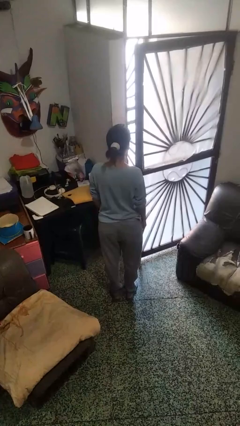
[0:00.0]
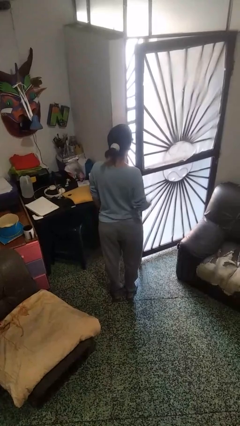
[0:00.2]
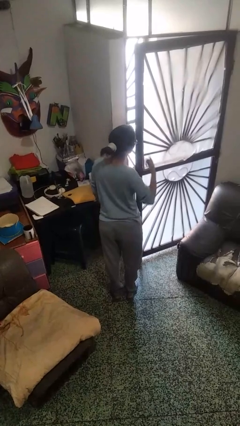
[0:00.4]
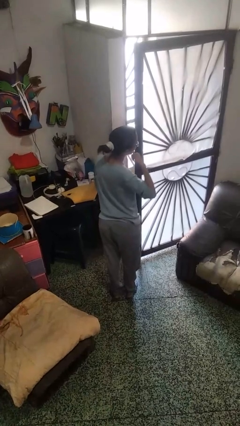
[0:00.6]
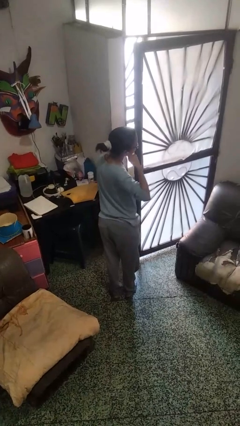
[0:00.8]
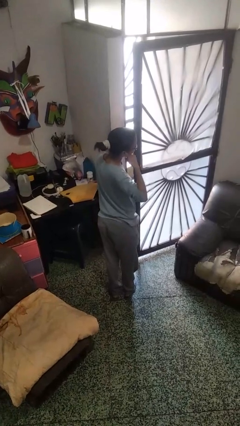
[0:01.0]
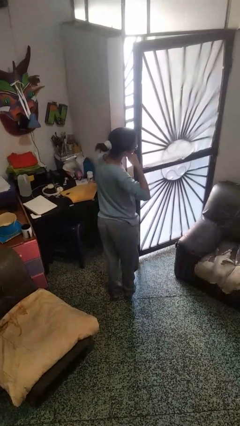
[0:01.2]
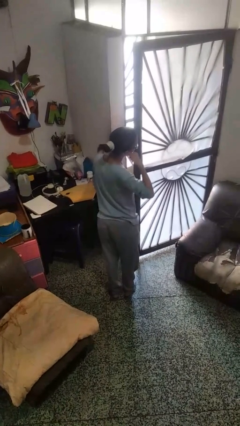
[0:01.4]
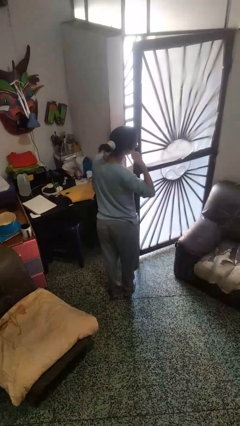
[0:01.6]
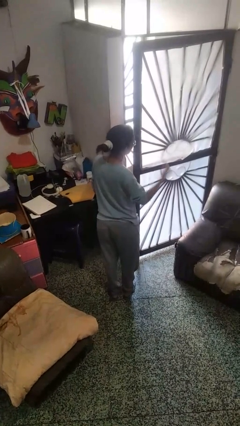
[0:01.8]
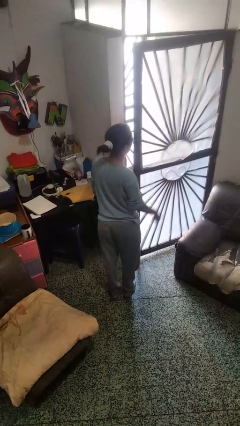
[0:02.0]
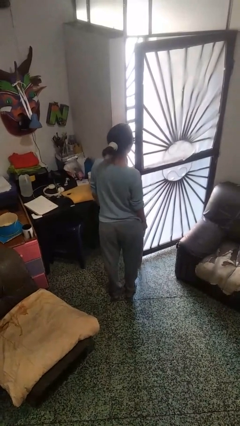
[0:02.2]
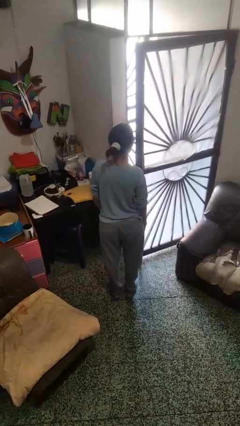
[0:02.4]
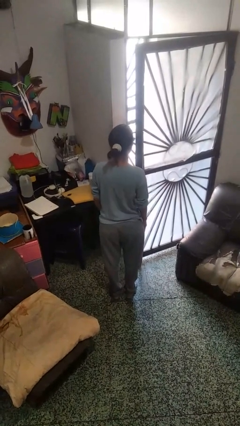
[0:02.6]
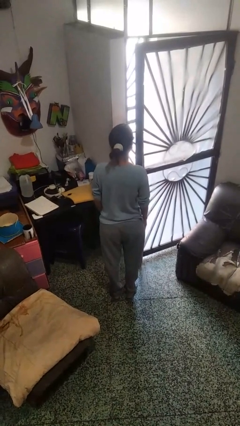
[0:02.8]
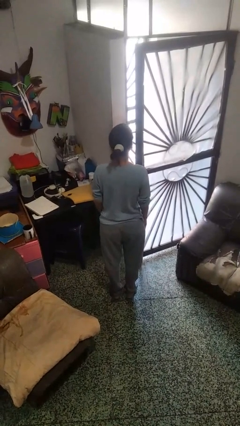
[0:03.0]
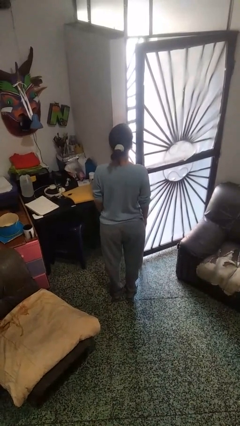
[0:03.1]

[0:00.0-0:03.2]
person gestures call me

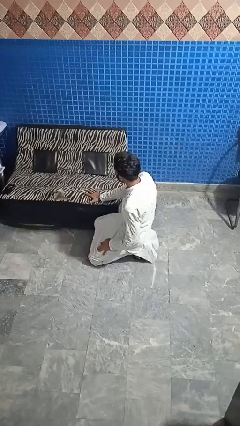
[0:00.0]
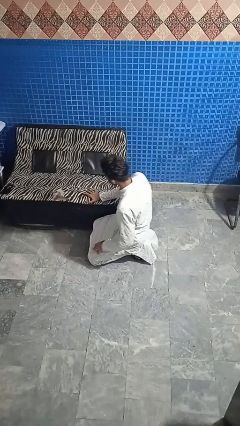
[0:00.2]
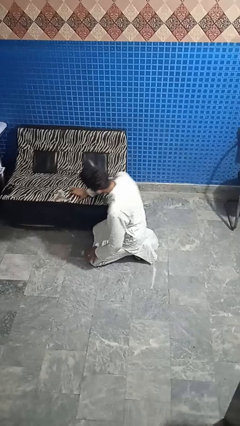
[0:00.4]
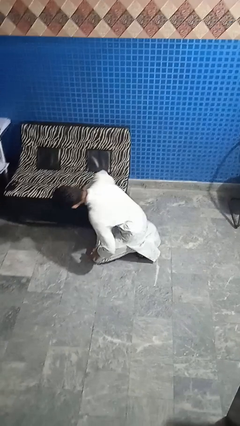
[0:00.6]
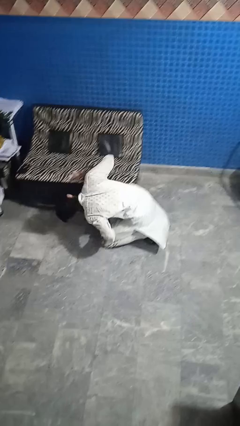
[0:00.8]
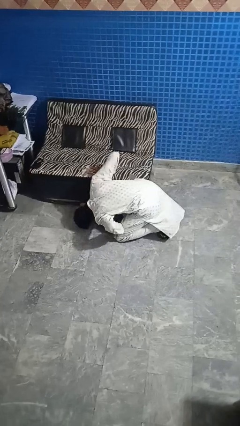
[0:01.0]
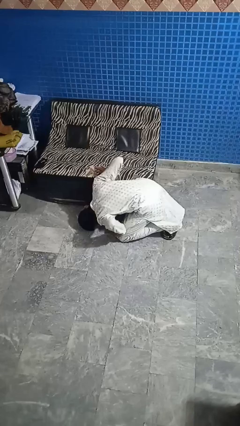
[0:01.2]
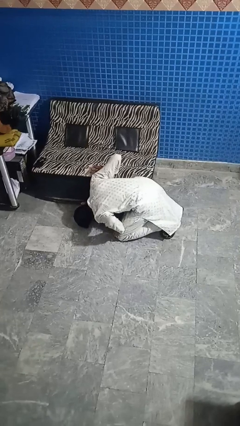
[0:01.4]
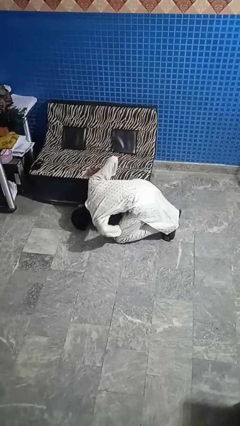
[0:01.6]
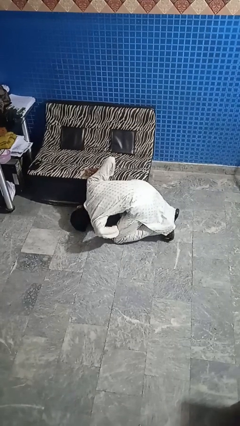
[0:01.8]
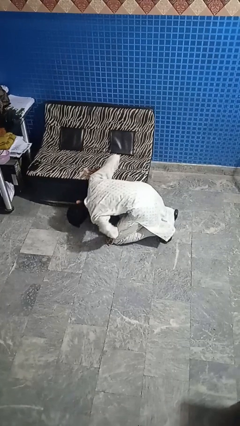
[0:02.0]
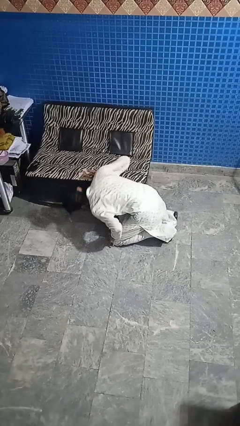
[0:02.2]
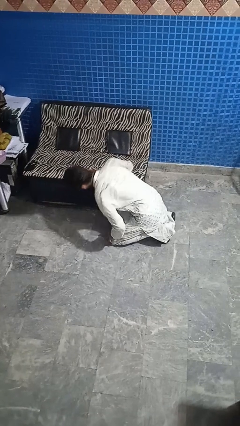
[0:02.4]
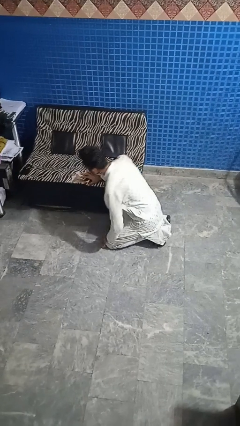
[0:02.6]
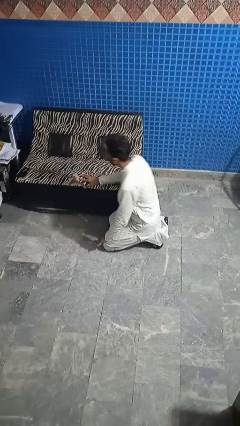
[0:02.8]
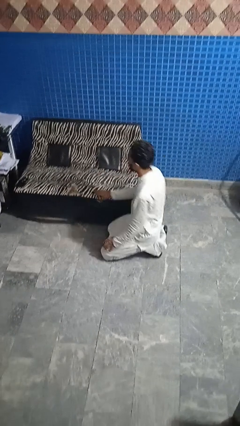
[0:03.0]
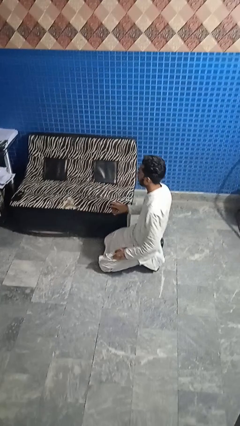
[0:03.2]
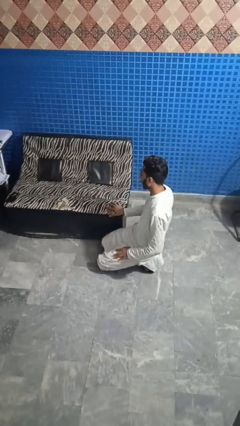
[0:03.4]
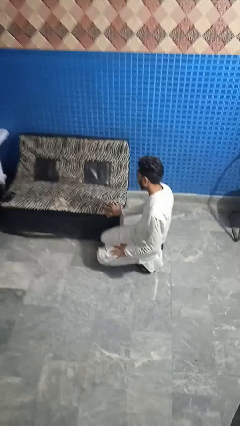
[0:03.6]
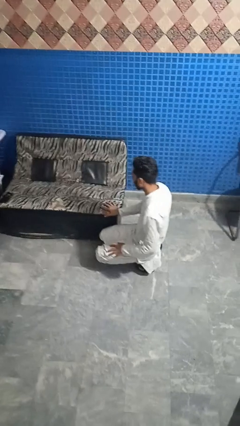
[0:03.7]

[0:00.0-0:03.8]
person searches under couch

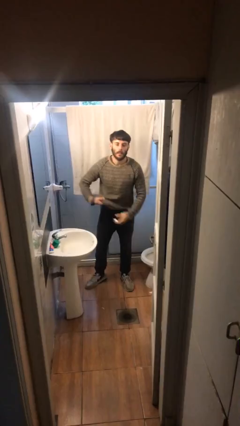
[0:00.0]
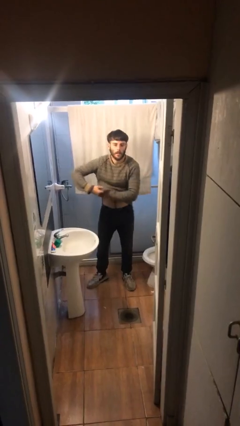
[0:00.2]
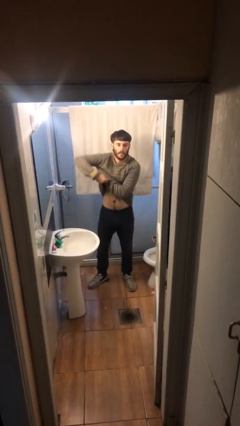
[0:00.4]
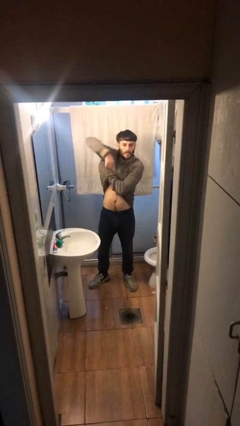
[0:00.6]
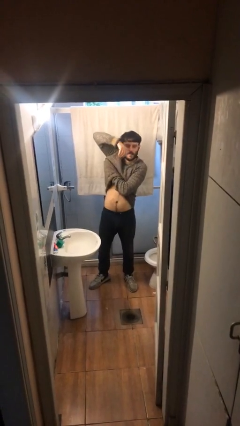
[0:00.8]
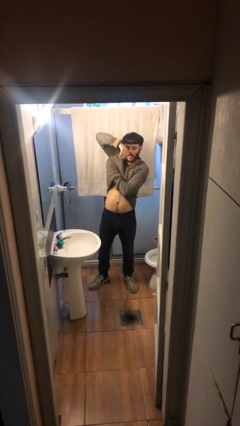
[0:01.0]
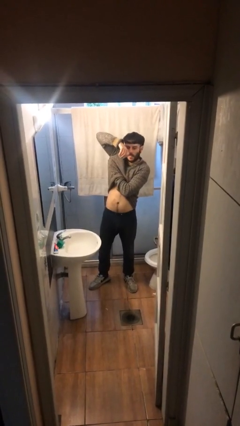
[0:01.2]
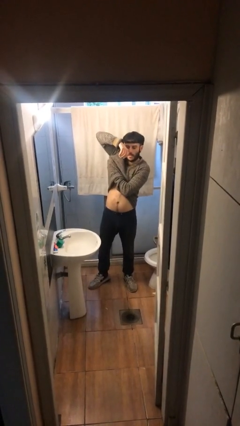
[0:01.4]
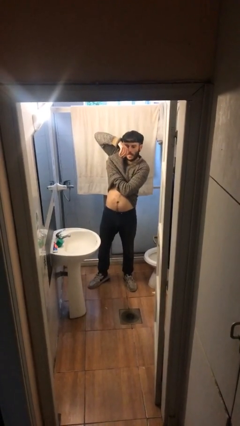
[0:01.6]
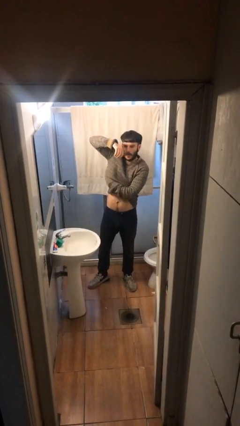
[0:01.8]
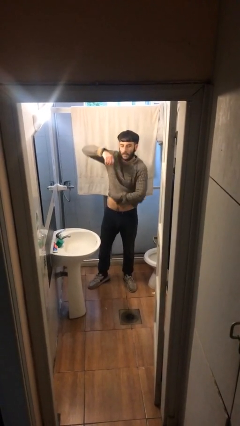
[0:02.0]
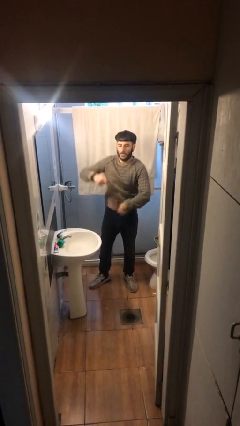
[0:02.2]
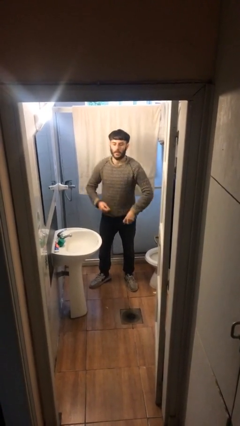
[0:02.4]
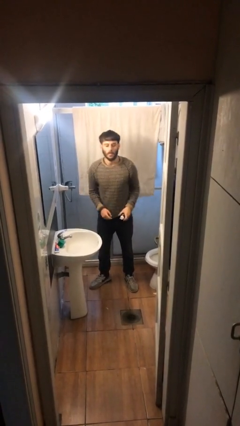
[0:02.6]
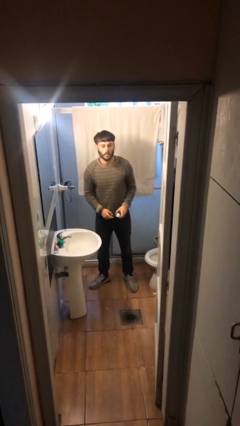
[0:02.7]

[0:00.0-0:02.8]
person applies deodorant

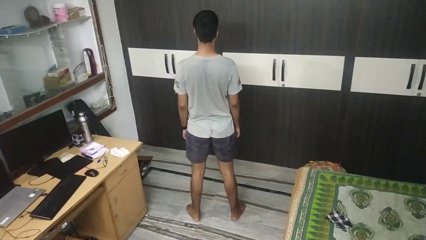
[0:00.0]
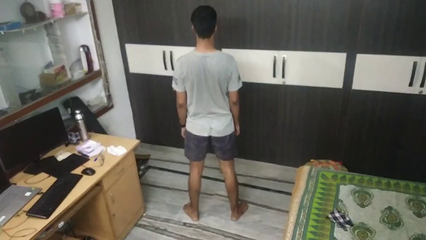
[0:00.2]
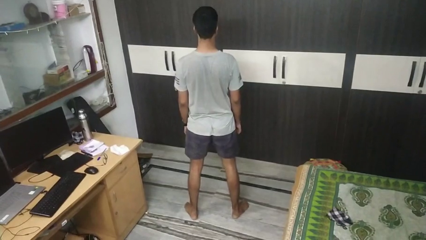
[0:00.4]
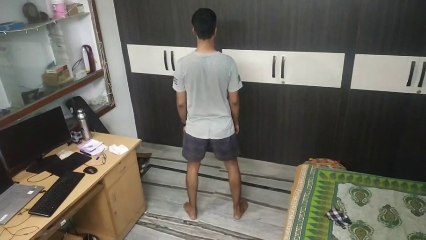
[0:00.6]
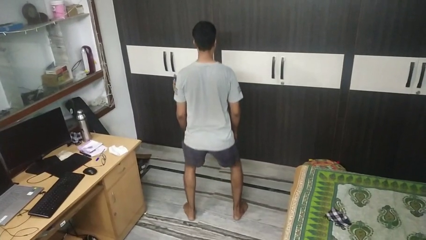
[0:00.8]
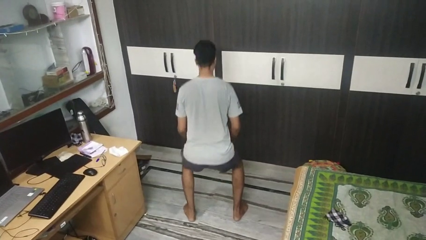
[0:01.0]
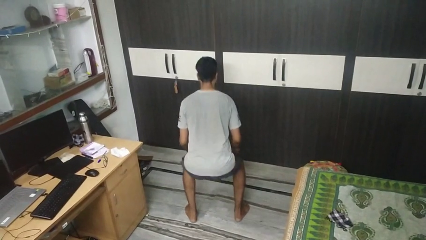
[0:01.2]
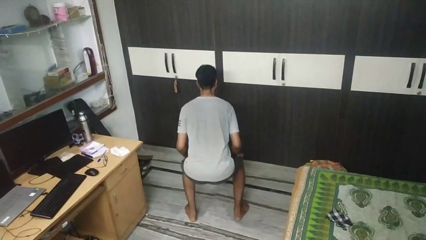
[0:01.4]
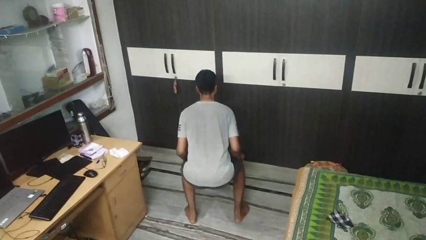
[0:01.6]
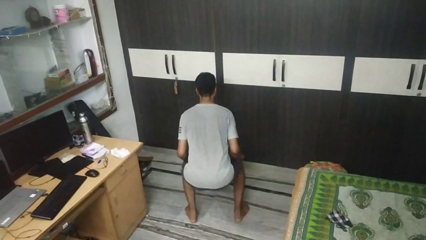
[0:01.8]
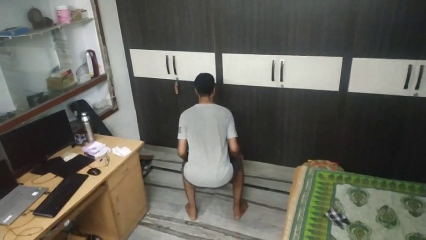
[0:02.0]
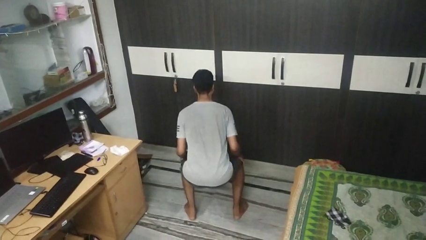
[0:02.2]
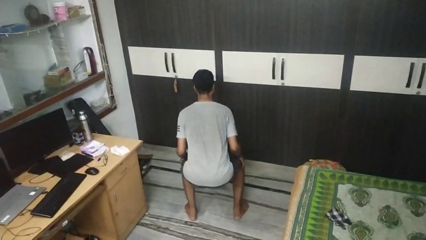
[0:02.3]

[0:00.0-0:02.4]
person squats

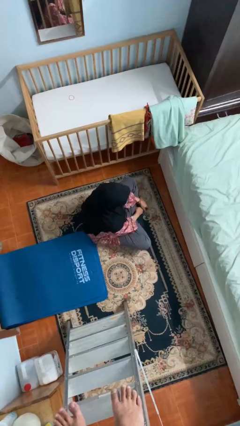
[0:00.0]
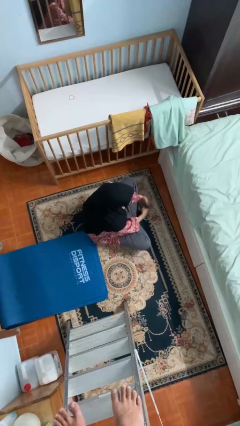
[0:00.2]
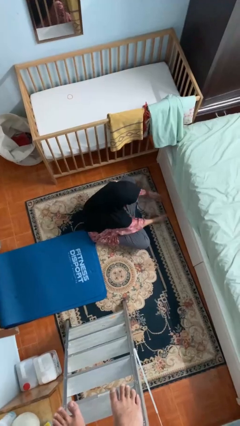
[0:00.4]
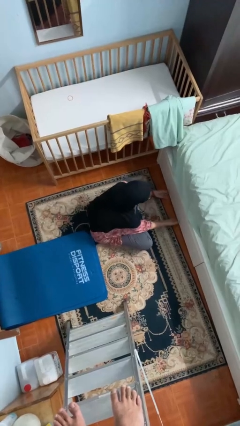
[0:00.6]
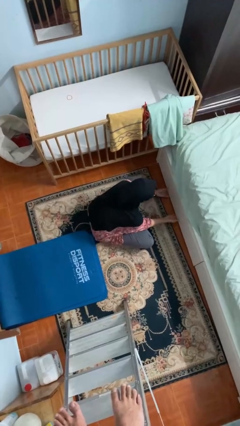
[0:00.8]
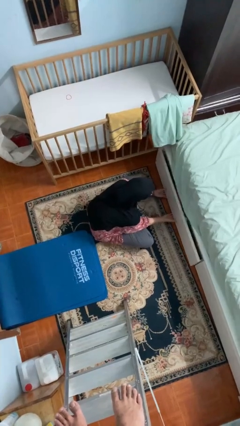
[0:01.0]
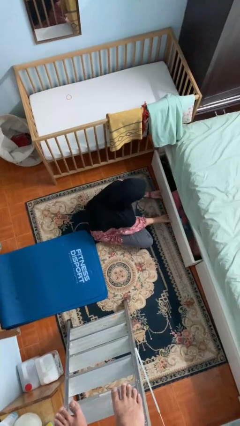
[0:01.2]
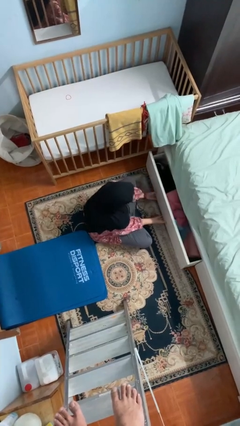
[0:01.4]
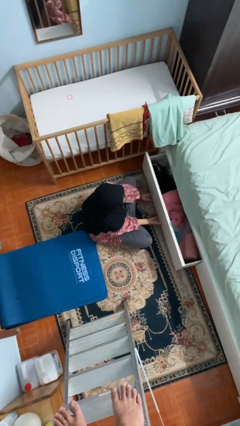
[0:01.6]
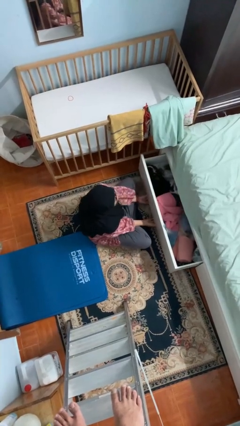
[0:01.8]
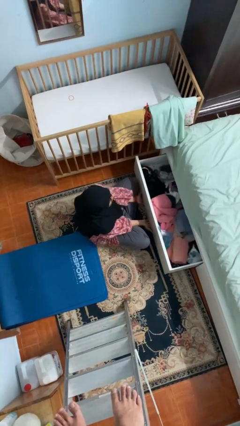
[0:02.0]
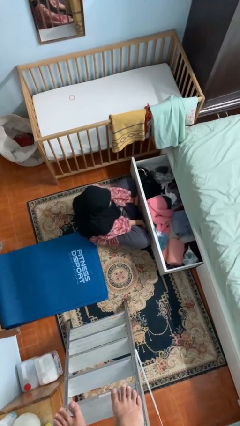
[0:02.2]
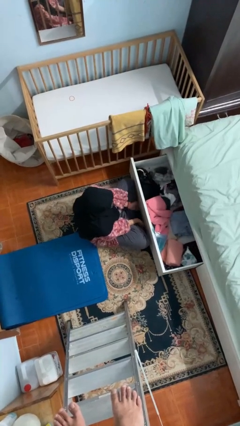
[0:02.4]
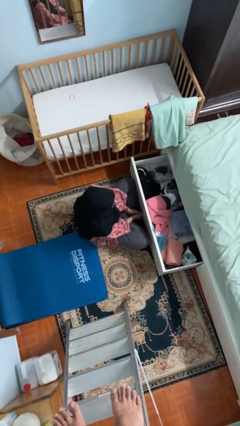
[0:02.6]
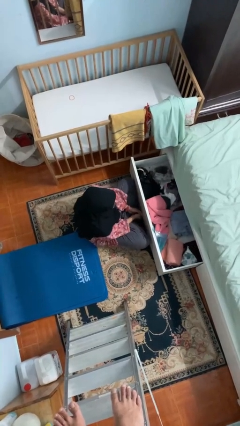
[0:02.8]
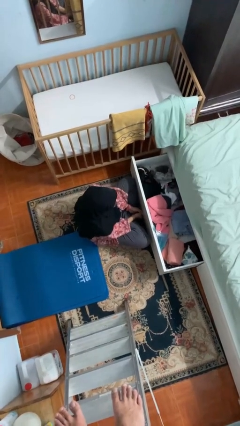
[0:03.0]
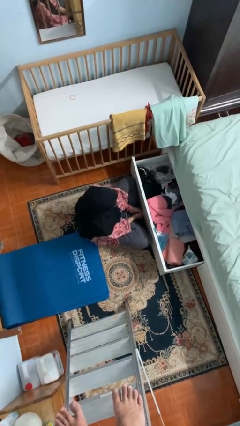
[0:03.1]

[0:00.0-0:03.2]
person opens dresser drawer

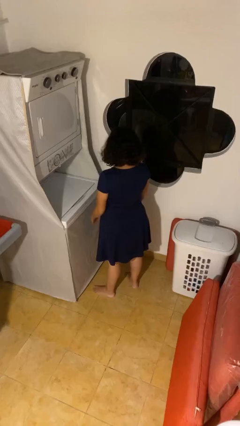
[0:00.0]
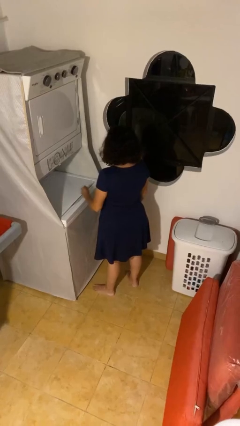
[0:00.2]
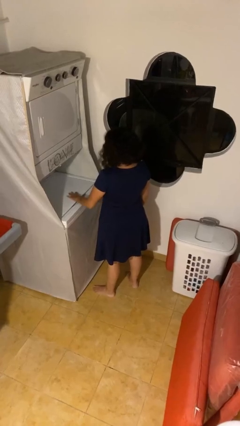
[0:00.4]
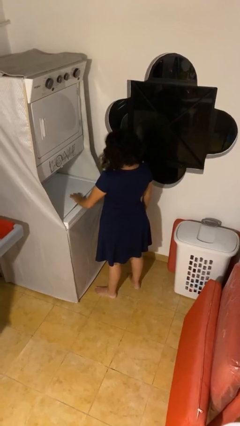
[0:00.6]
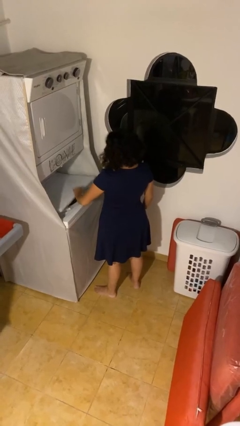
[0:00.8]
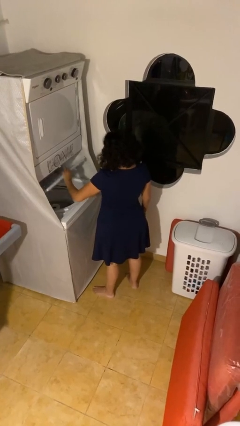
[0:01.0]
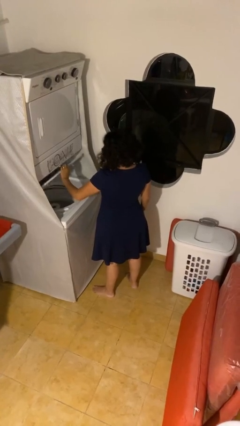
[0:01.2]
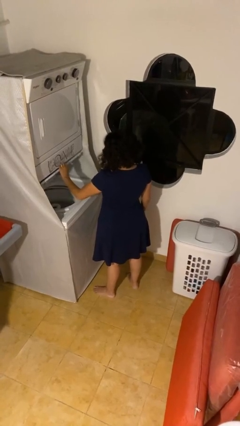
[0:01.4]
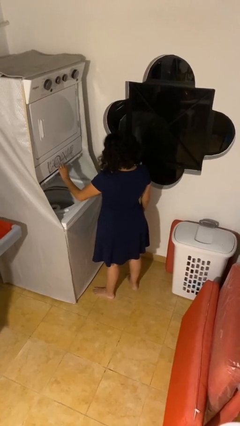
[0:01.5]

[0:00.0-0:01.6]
person opens clothes washer

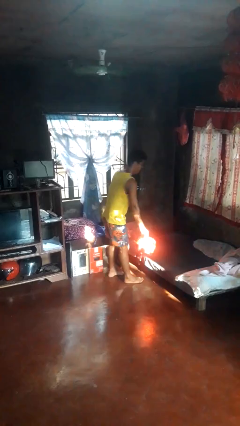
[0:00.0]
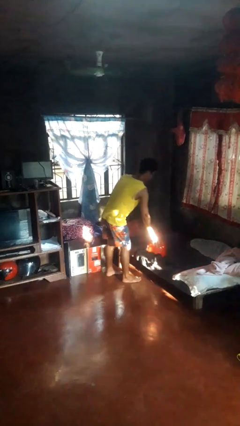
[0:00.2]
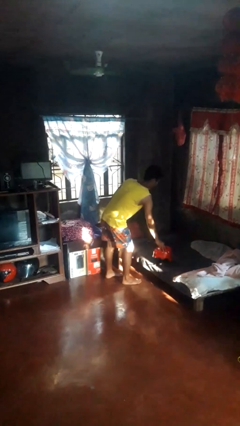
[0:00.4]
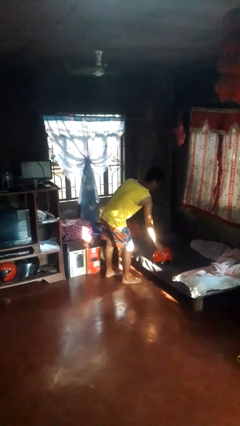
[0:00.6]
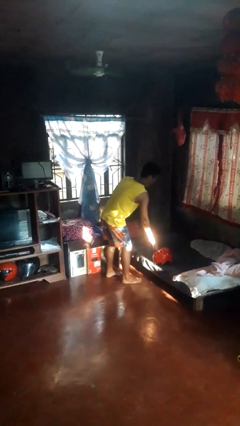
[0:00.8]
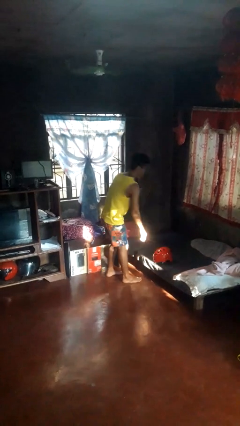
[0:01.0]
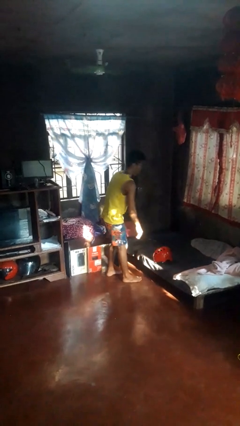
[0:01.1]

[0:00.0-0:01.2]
person puts down object on bed
